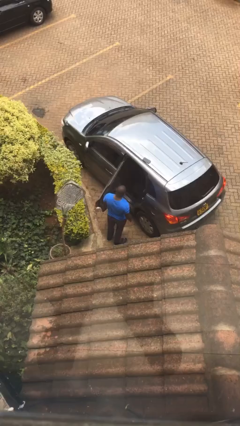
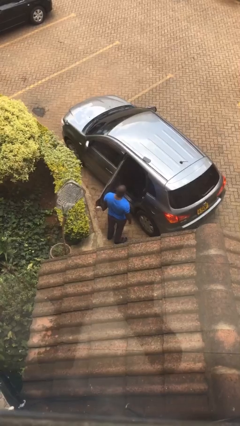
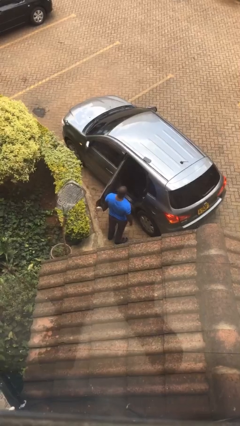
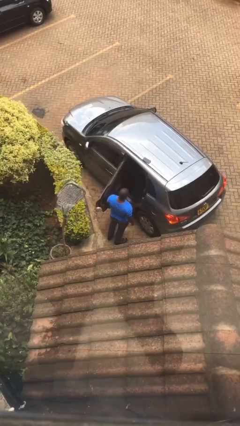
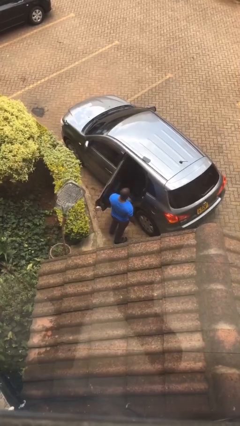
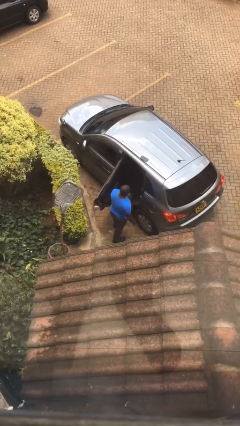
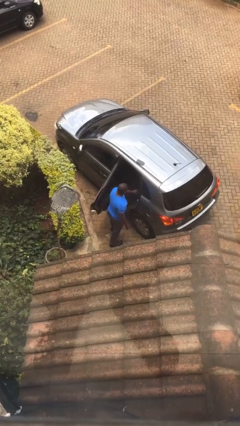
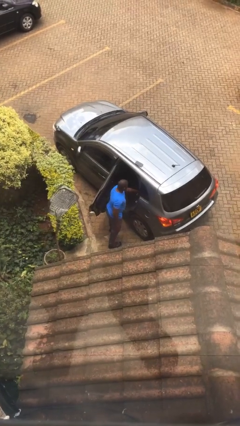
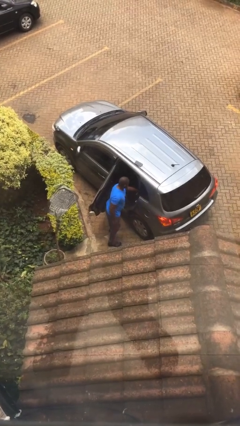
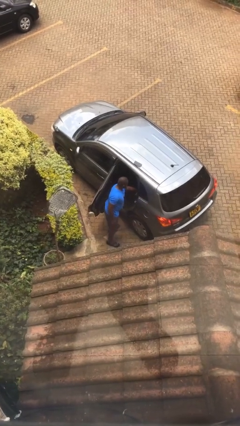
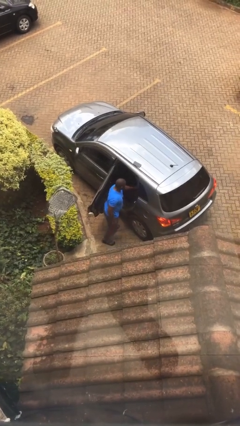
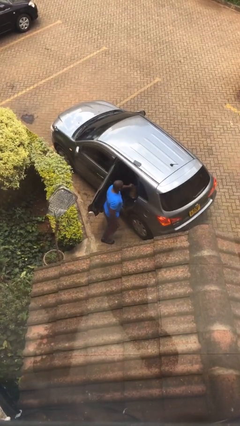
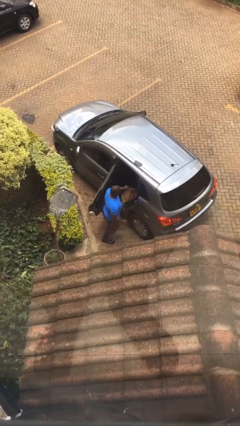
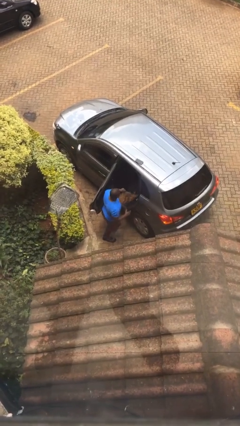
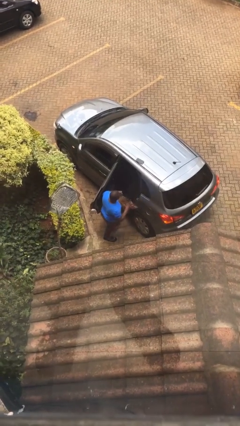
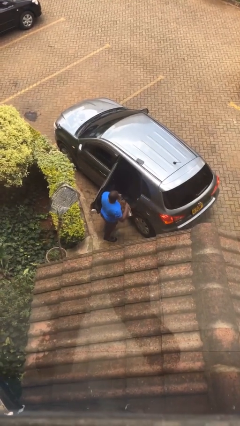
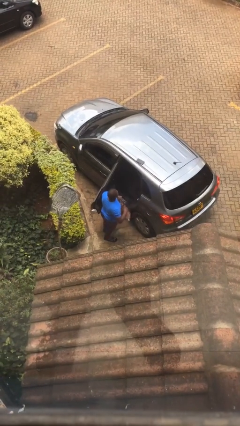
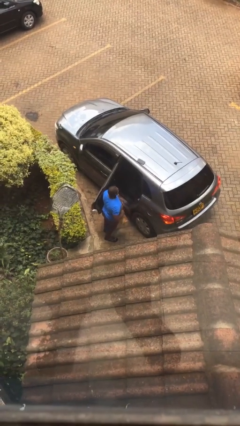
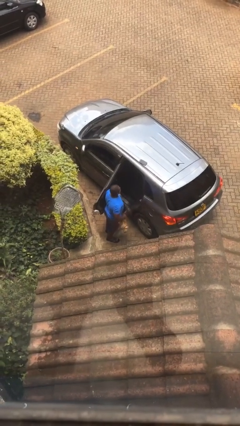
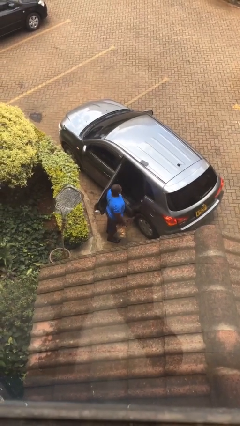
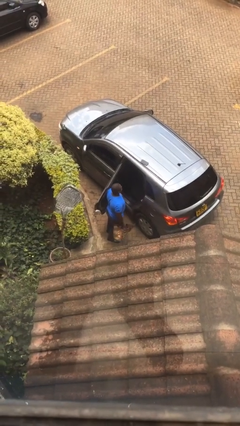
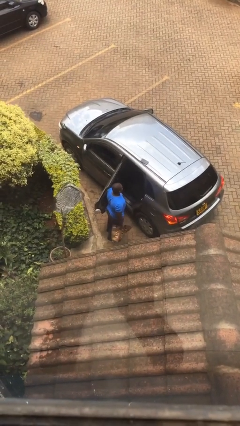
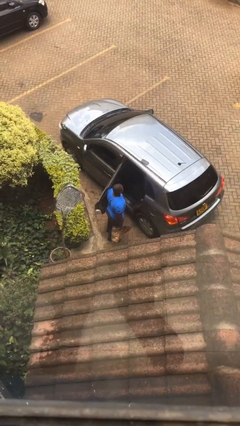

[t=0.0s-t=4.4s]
person unloads car

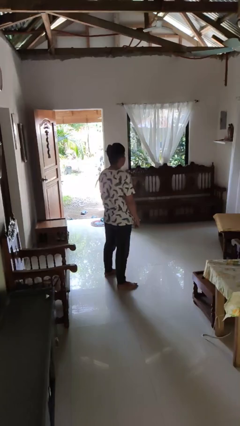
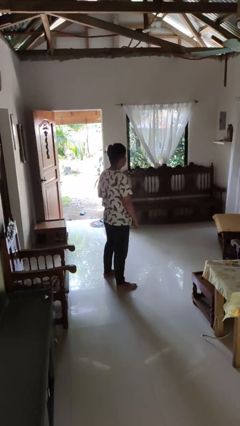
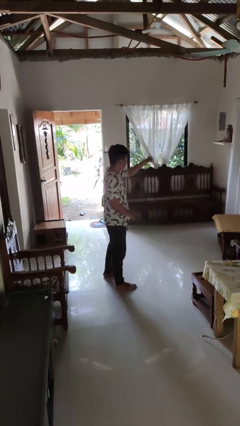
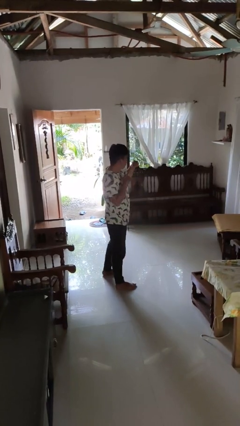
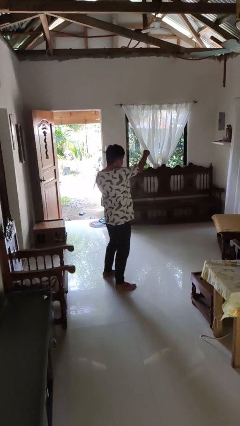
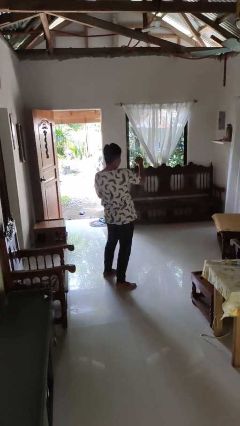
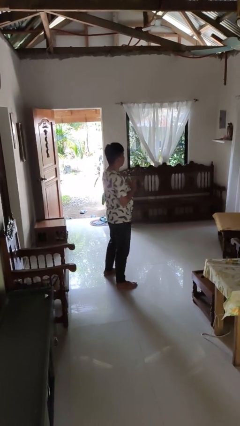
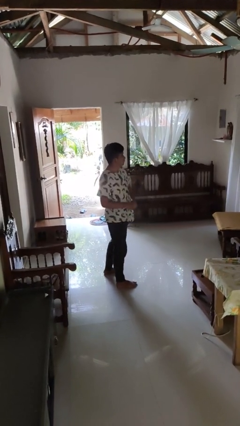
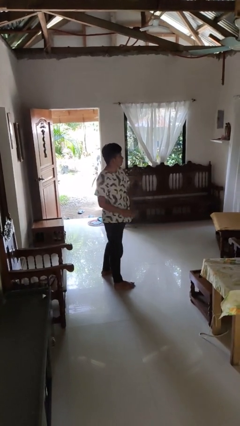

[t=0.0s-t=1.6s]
person punches

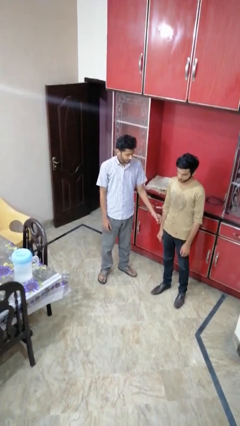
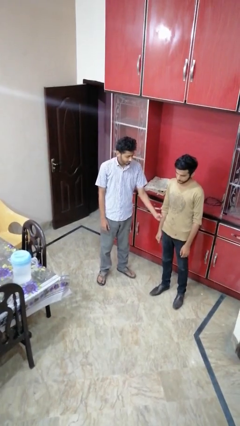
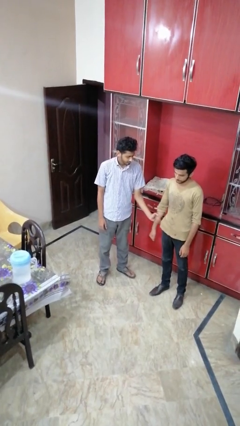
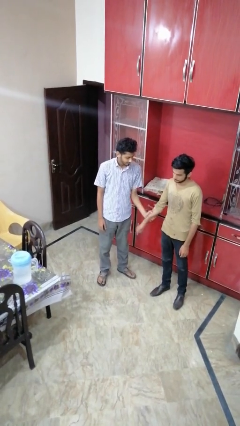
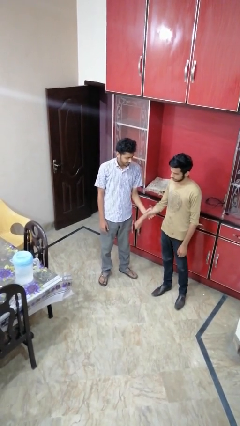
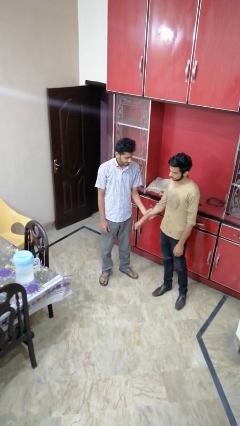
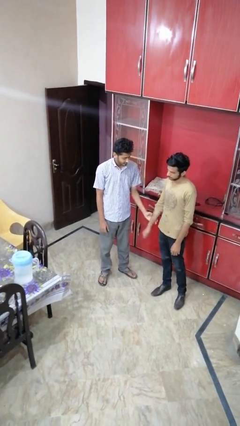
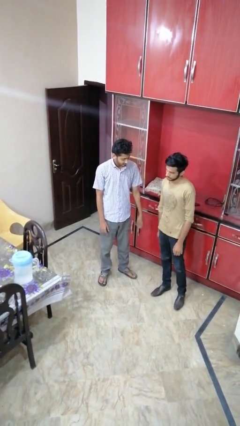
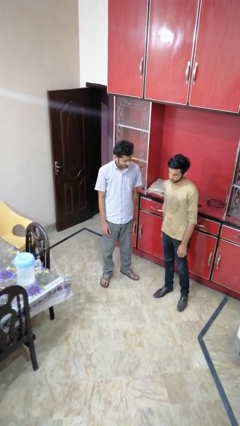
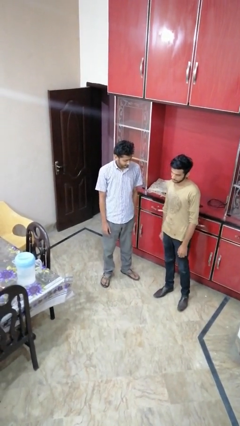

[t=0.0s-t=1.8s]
person grabs person by forearm

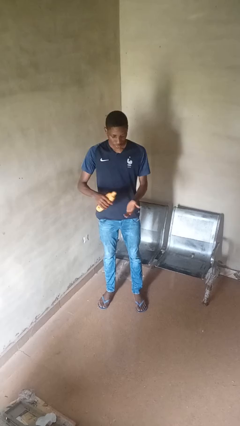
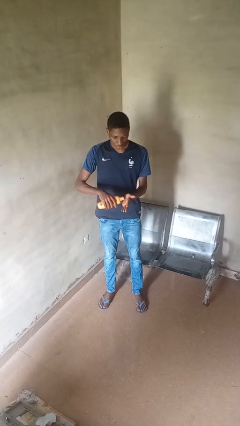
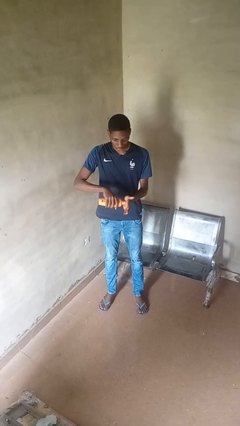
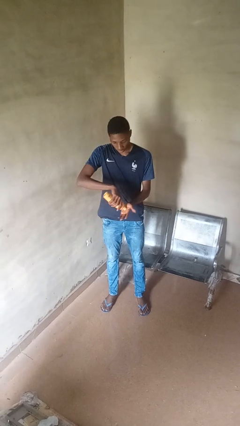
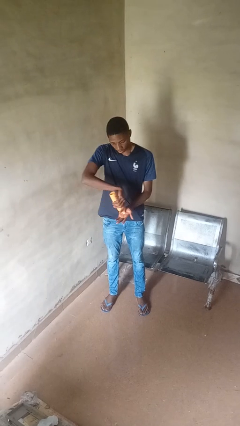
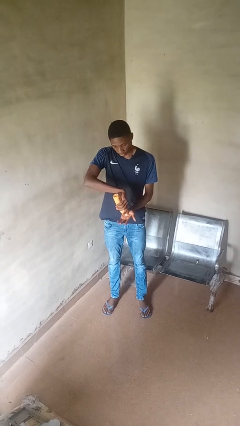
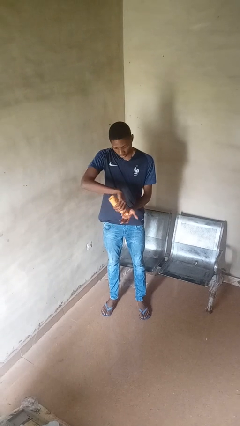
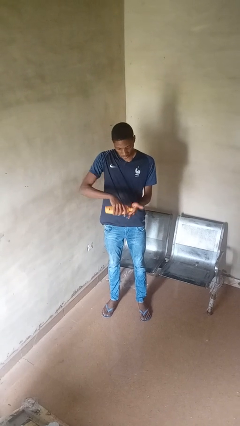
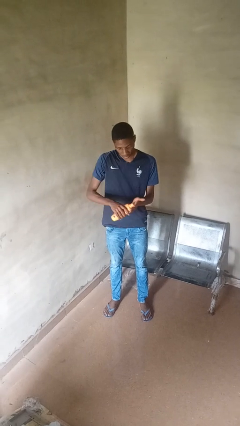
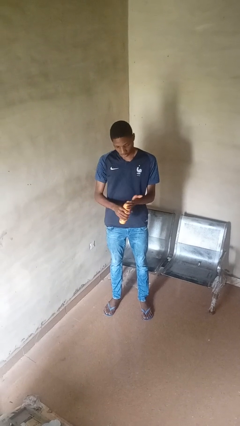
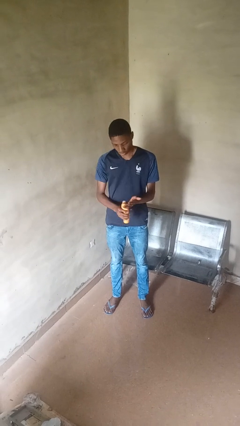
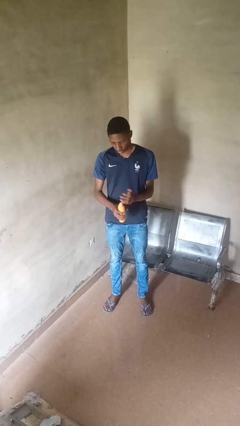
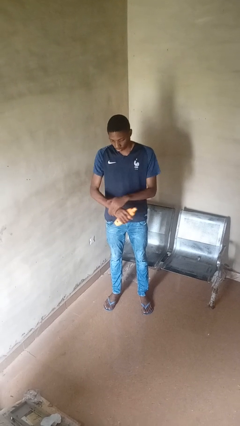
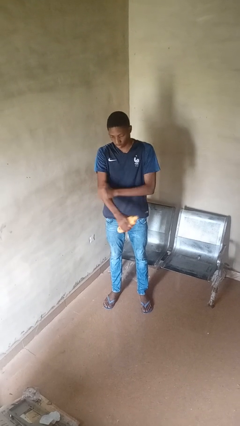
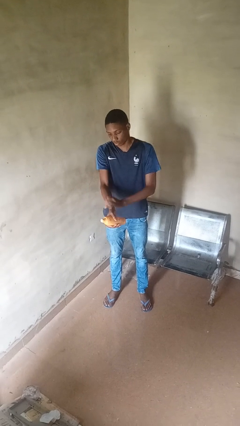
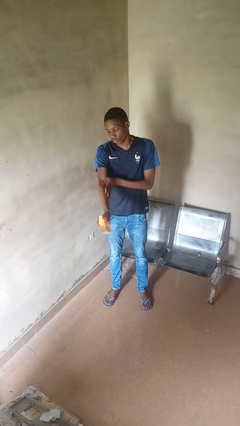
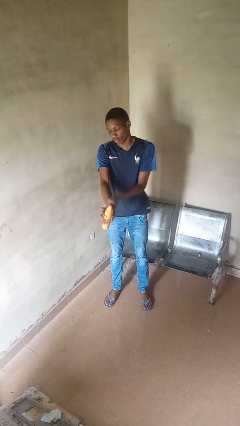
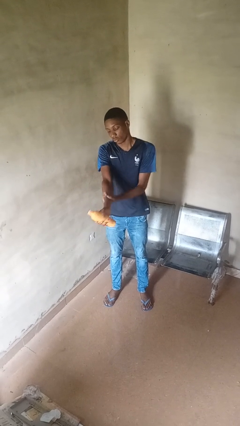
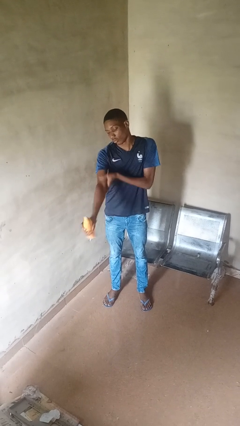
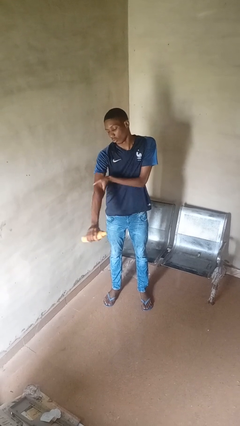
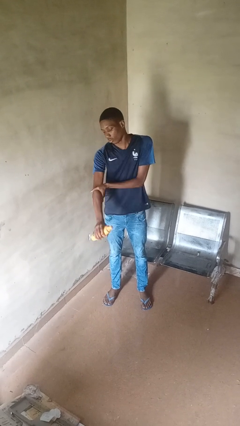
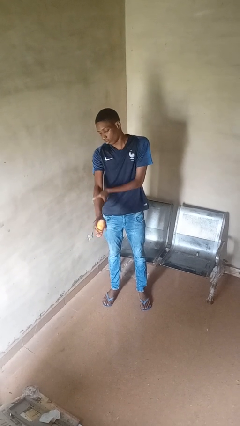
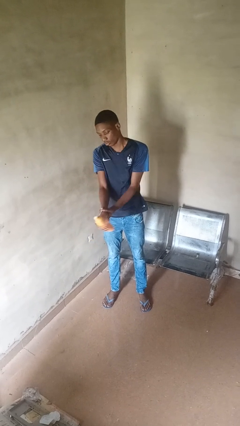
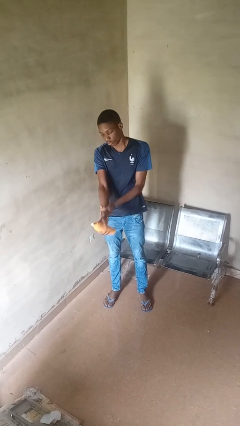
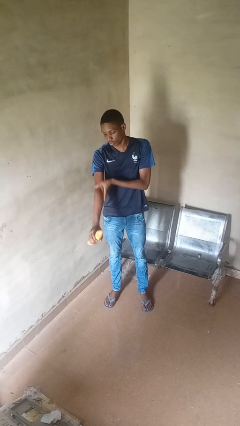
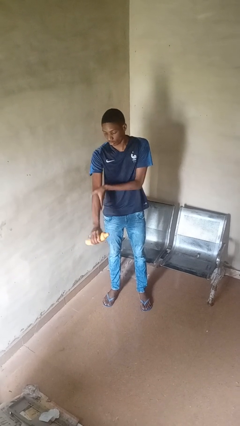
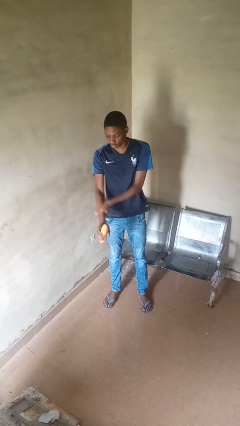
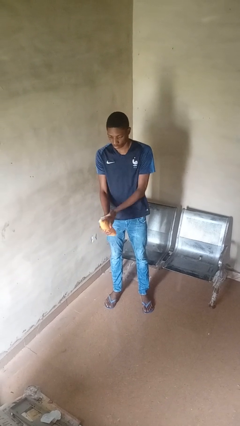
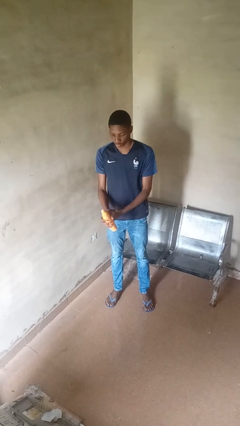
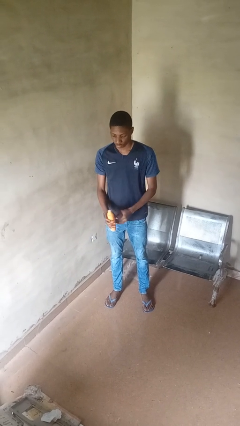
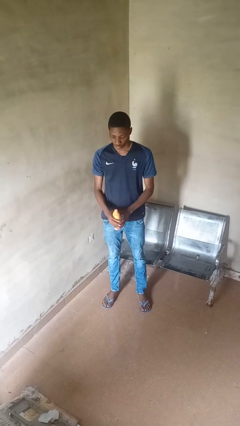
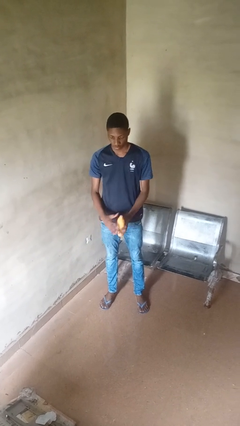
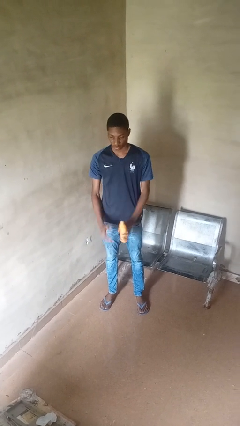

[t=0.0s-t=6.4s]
person applies sunscreen

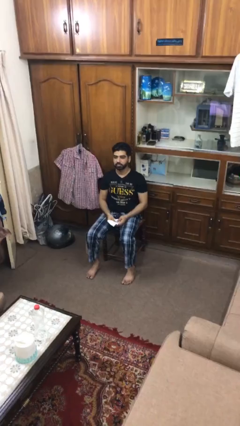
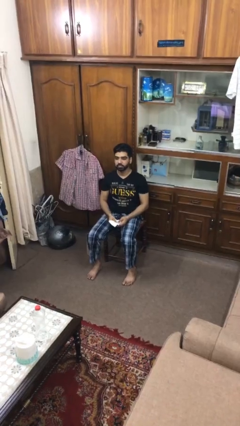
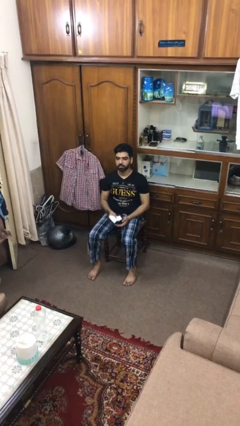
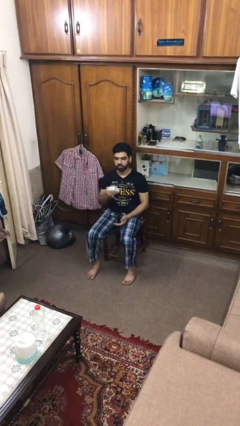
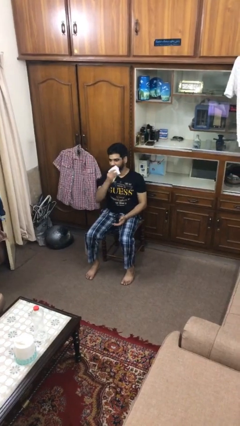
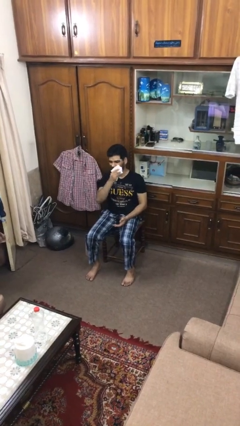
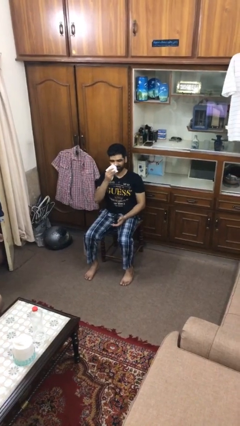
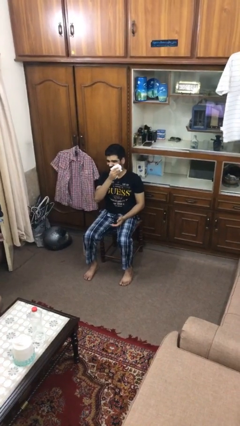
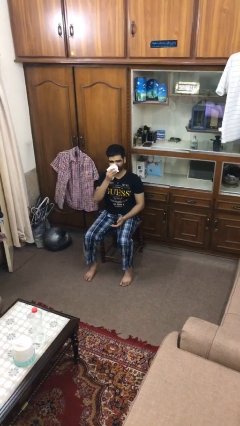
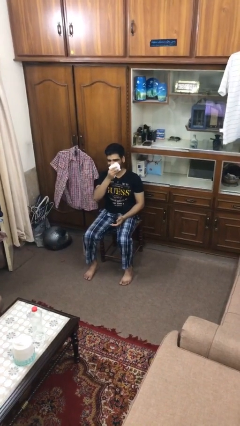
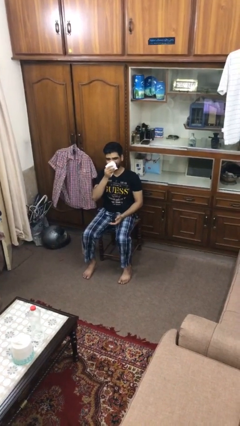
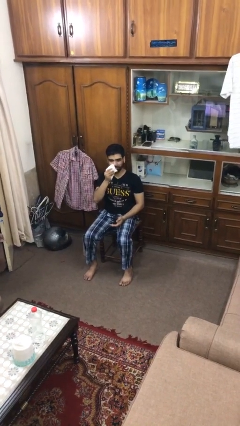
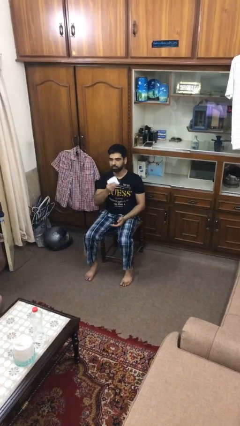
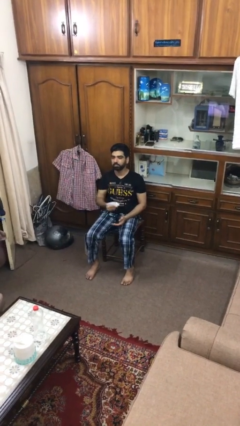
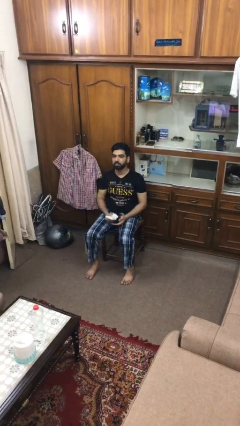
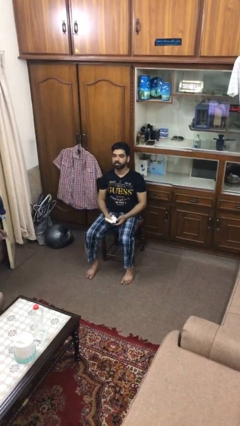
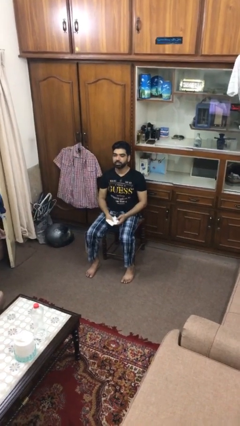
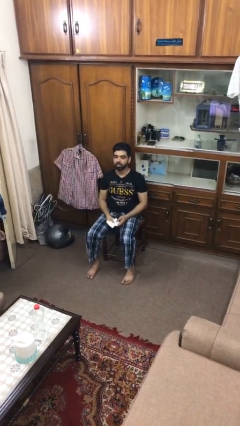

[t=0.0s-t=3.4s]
person wipes mouth with napkin
